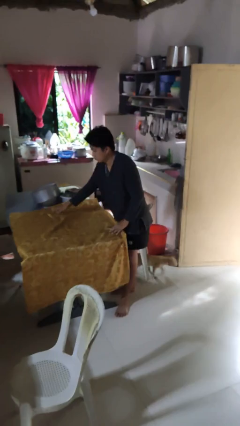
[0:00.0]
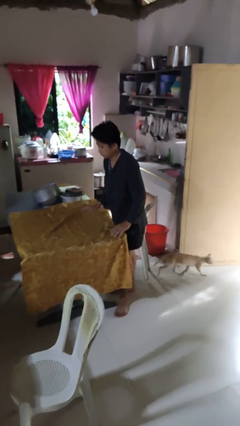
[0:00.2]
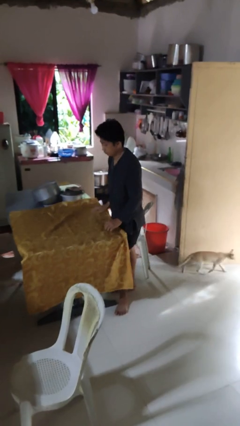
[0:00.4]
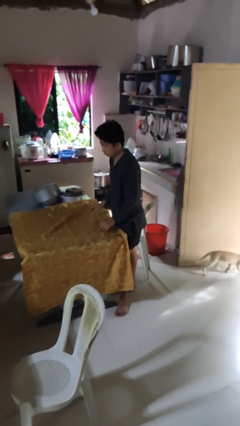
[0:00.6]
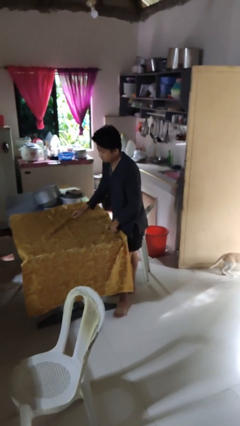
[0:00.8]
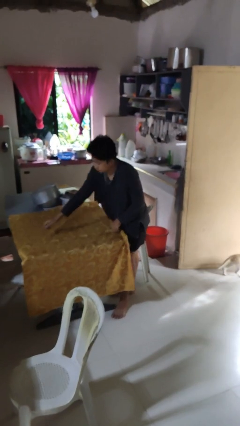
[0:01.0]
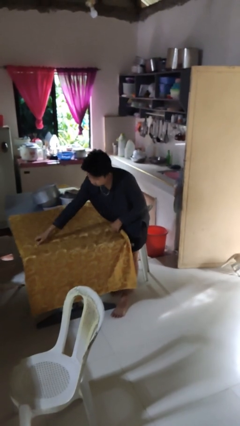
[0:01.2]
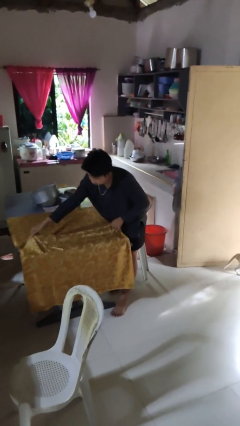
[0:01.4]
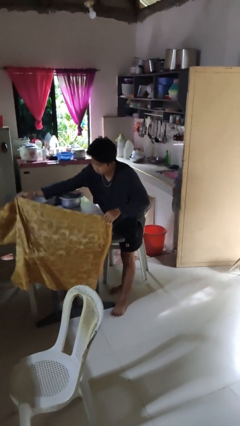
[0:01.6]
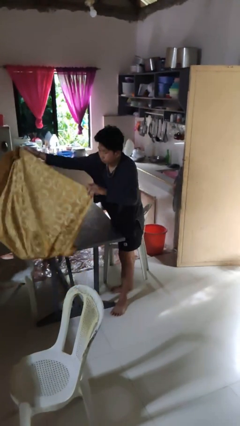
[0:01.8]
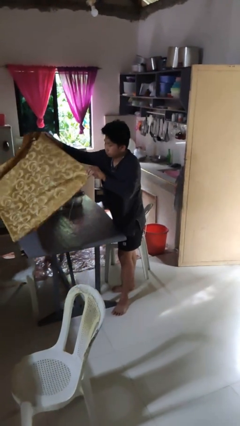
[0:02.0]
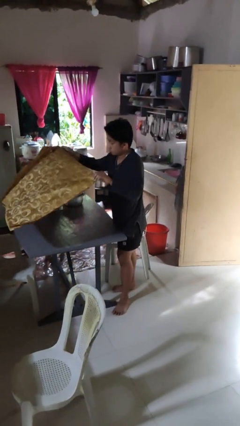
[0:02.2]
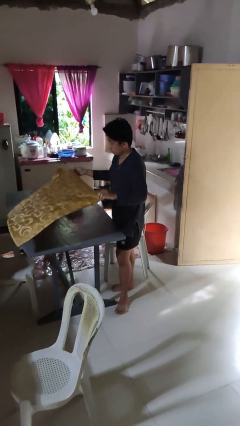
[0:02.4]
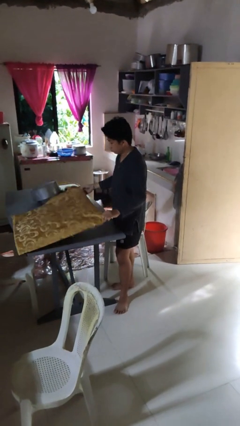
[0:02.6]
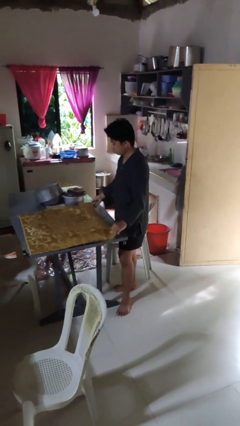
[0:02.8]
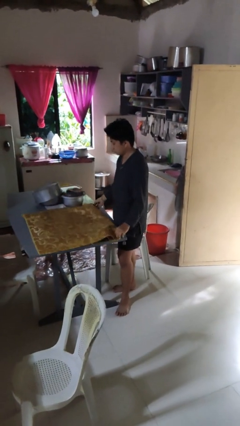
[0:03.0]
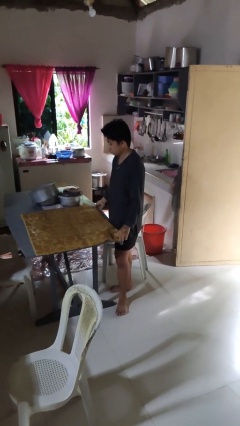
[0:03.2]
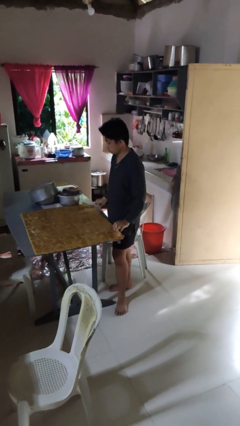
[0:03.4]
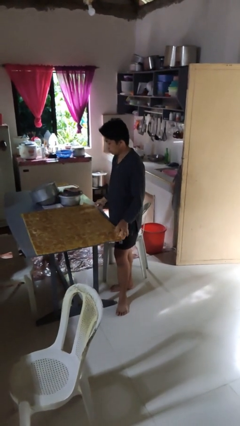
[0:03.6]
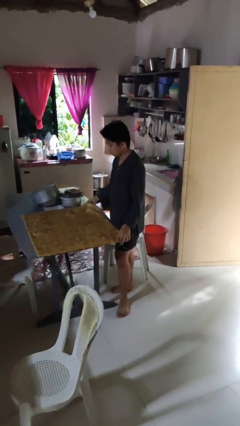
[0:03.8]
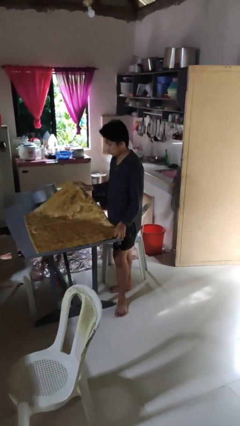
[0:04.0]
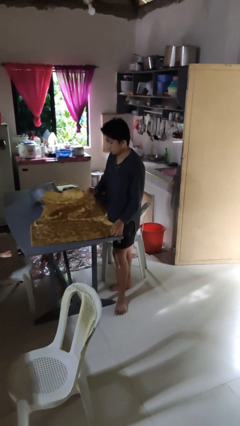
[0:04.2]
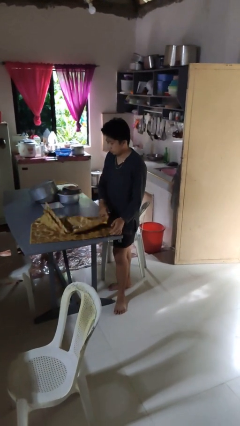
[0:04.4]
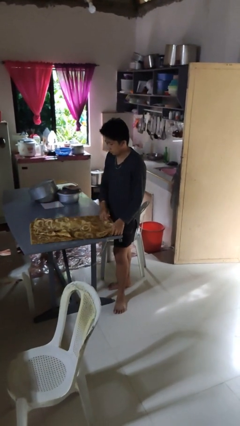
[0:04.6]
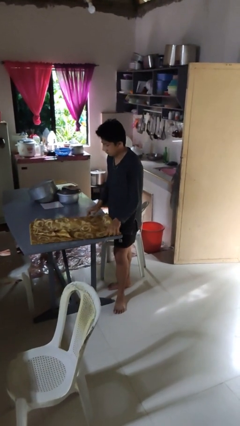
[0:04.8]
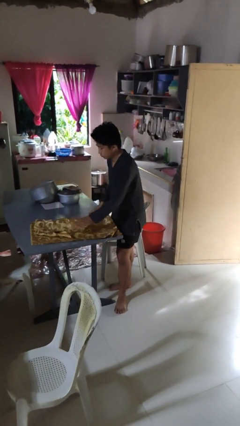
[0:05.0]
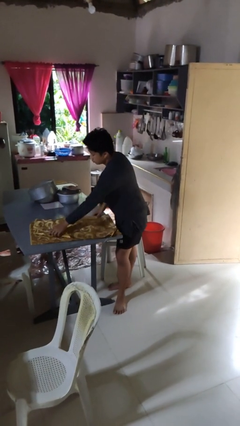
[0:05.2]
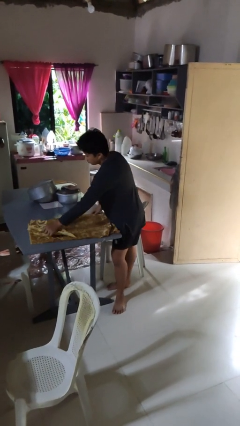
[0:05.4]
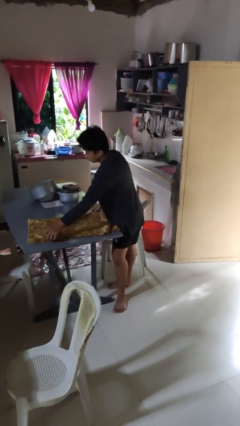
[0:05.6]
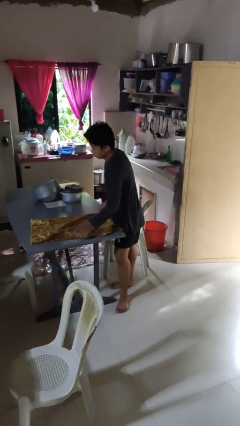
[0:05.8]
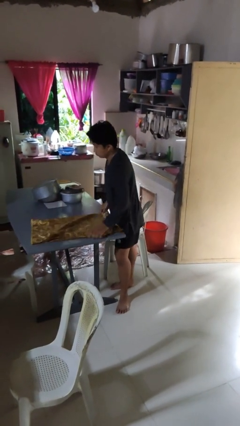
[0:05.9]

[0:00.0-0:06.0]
person folds tablecloth

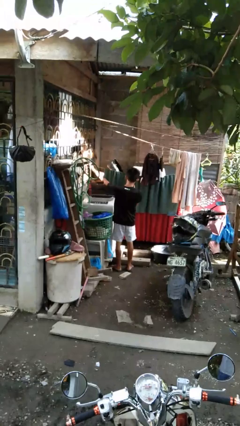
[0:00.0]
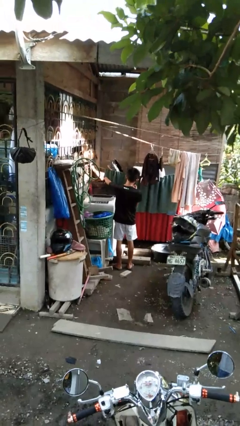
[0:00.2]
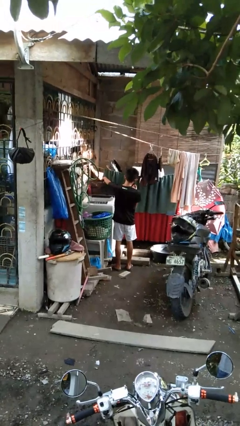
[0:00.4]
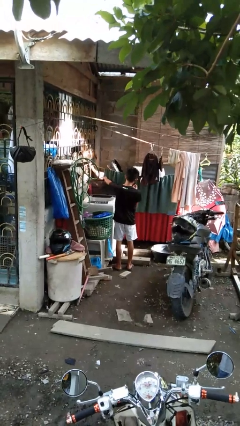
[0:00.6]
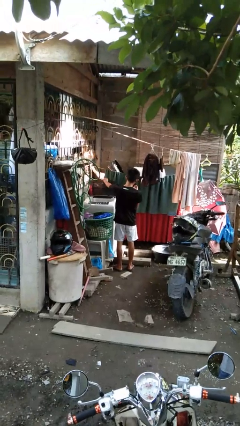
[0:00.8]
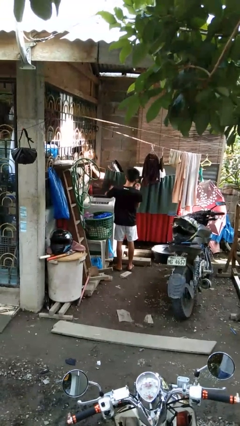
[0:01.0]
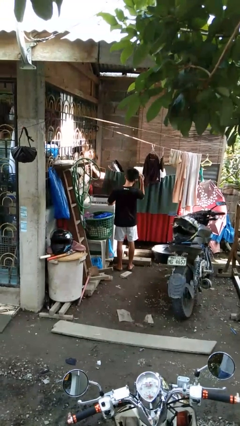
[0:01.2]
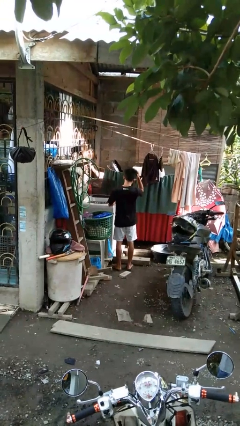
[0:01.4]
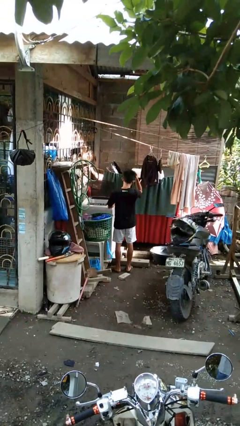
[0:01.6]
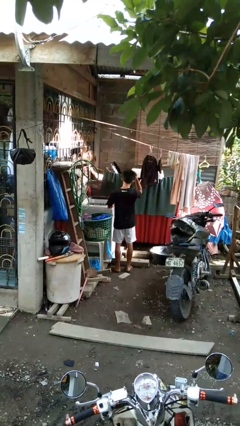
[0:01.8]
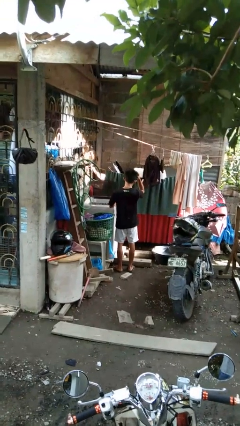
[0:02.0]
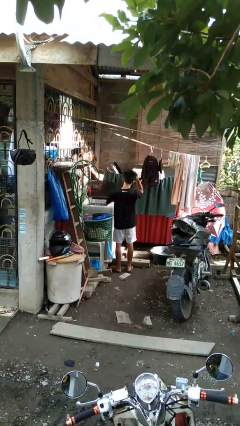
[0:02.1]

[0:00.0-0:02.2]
person opens clothes washer

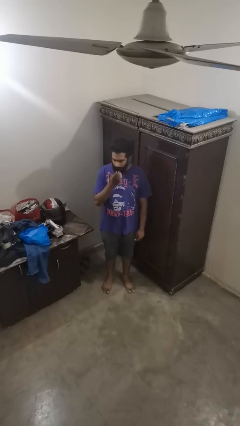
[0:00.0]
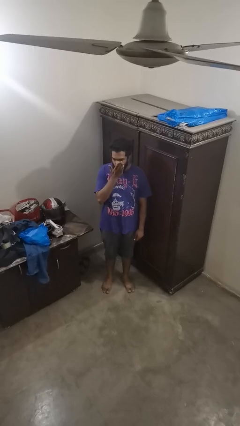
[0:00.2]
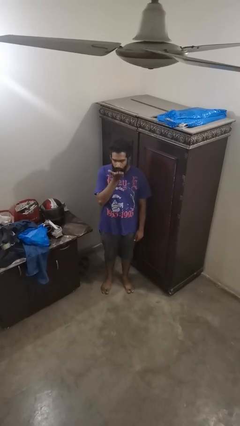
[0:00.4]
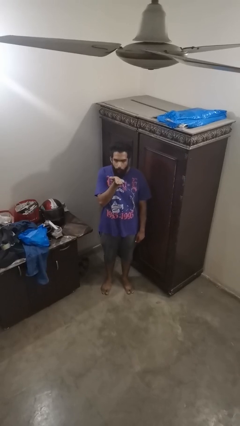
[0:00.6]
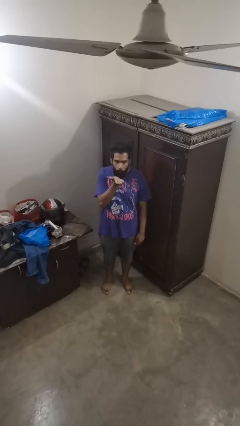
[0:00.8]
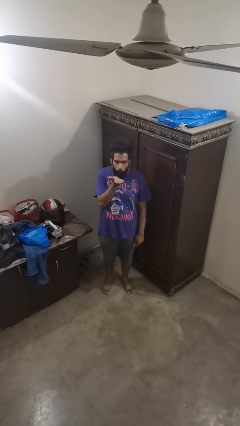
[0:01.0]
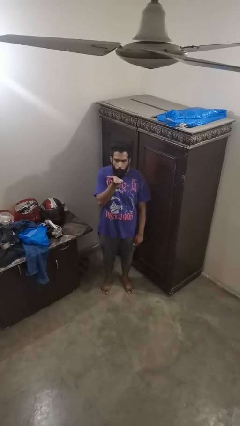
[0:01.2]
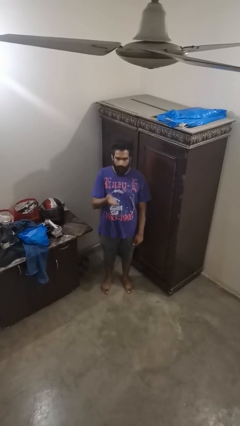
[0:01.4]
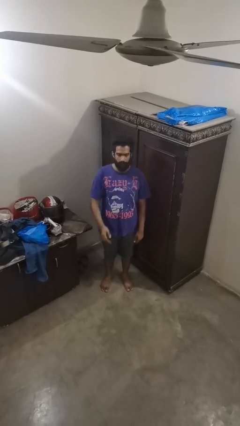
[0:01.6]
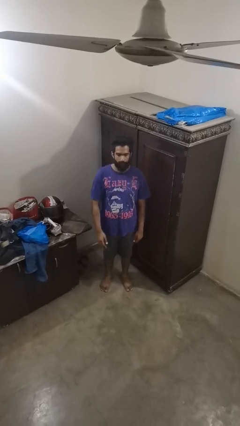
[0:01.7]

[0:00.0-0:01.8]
person gestures blow kiss

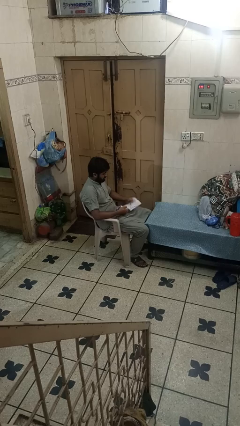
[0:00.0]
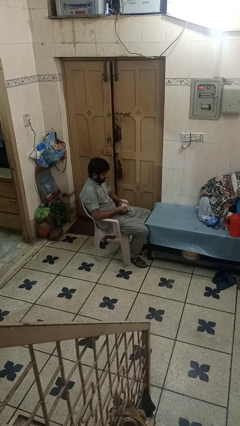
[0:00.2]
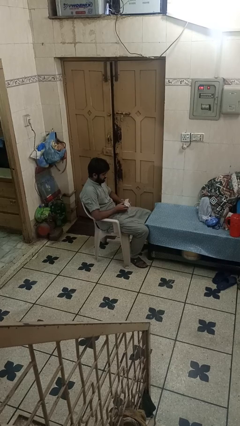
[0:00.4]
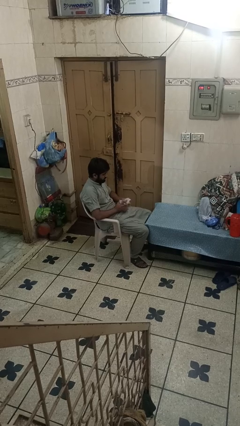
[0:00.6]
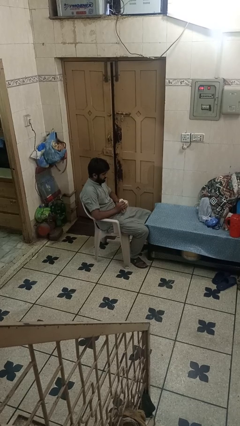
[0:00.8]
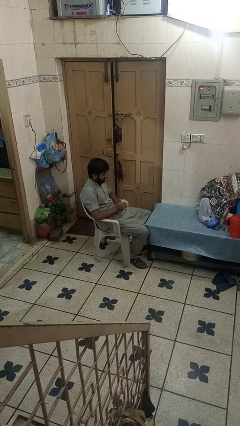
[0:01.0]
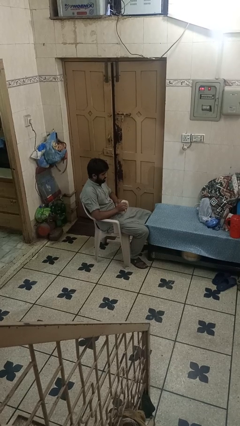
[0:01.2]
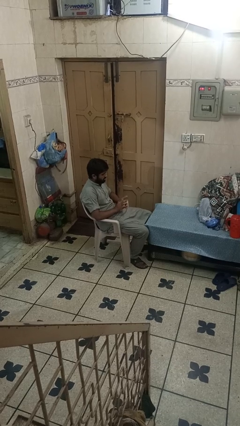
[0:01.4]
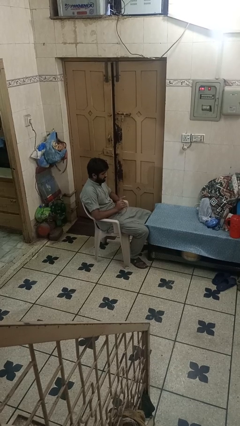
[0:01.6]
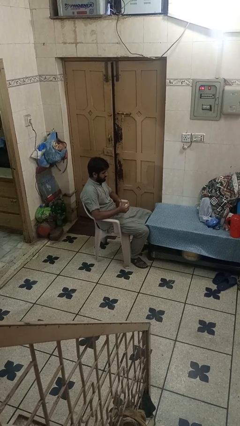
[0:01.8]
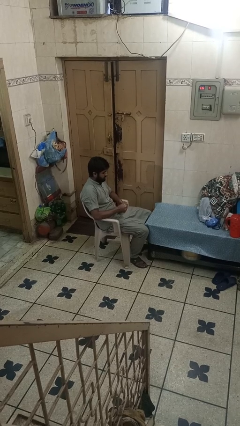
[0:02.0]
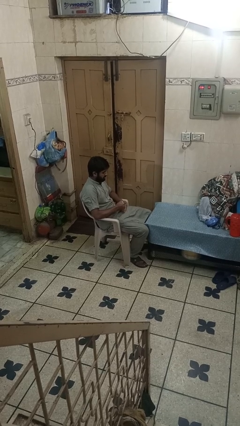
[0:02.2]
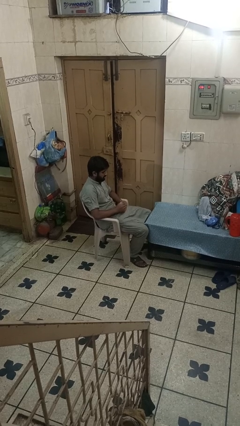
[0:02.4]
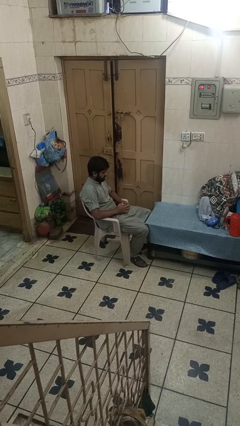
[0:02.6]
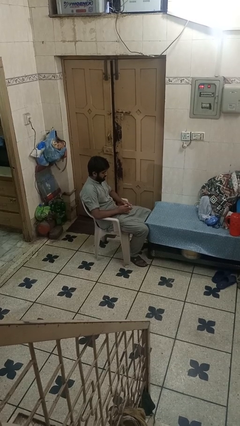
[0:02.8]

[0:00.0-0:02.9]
person crumples paper

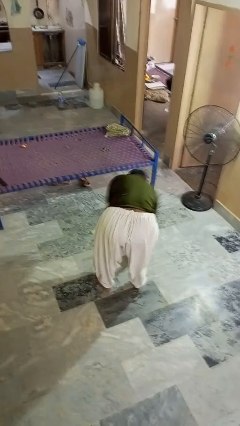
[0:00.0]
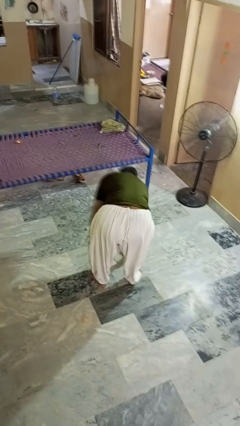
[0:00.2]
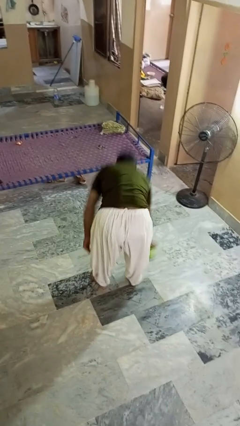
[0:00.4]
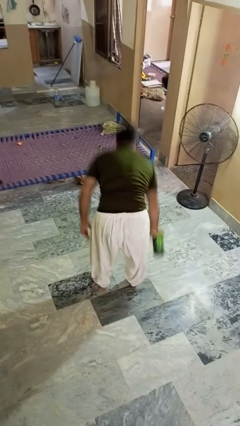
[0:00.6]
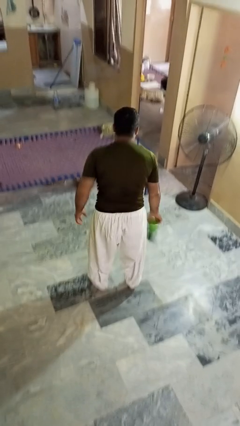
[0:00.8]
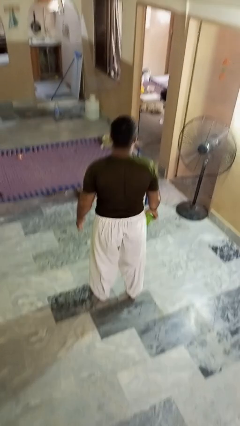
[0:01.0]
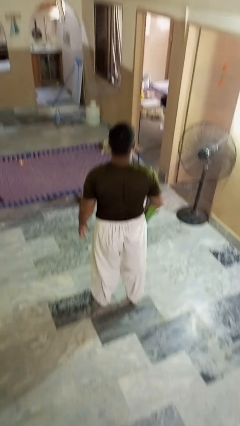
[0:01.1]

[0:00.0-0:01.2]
person picks up object from floor

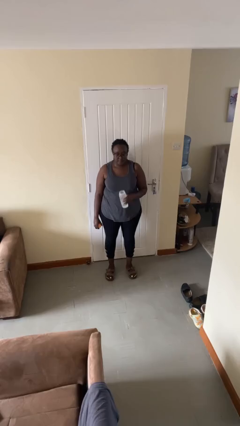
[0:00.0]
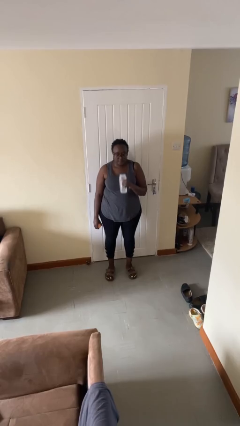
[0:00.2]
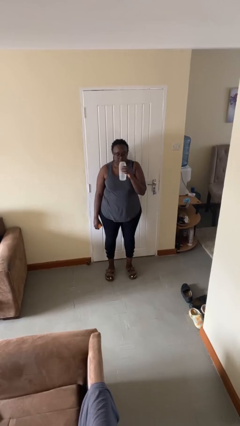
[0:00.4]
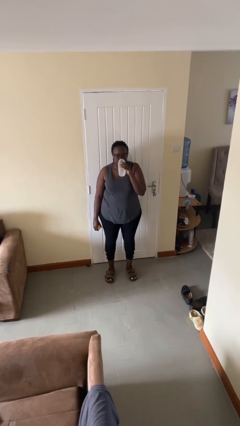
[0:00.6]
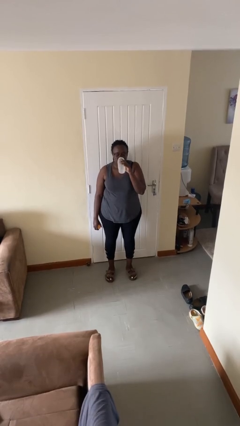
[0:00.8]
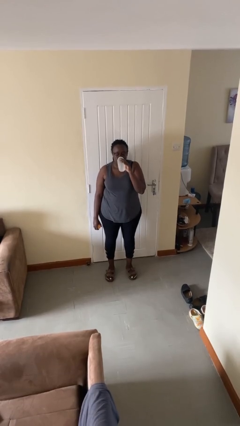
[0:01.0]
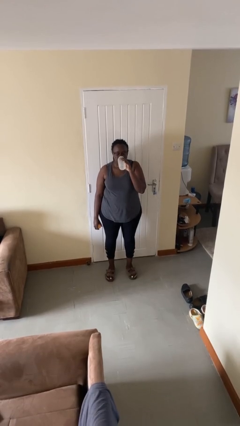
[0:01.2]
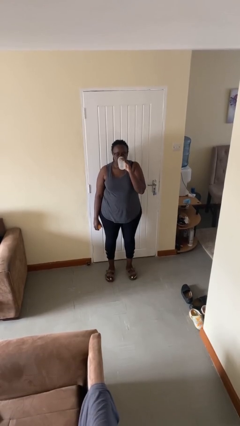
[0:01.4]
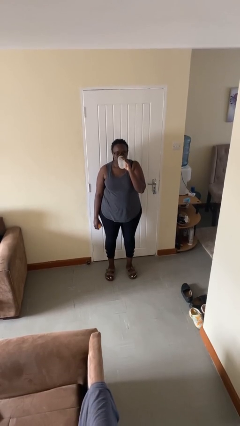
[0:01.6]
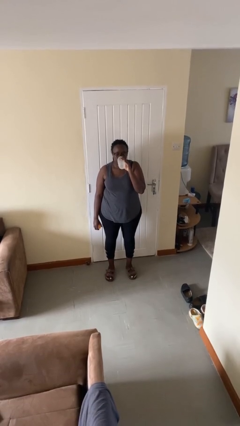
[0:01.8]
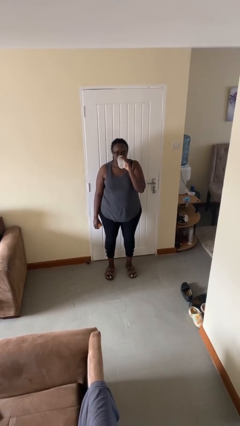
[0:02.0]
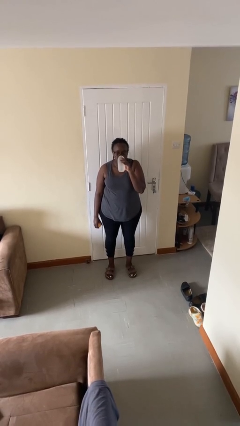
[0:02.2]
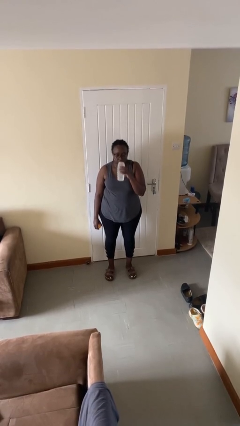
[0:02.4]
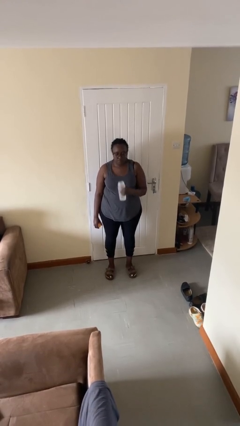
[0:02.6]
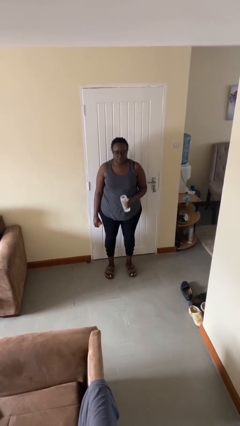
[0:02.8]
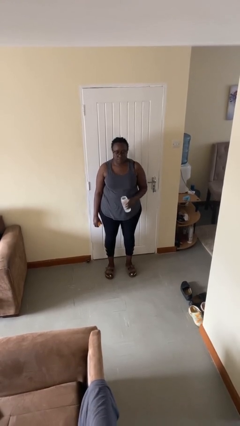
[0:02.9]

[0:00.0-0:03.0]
person drinks from bottle

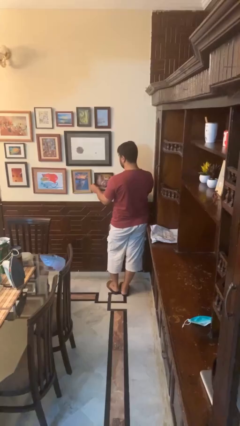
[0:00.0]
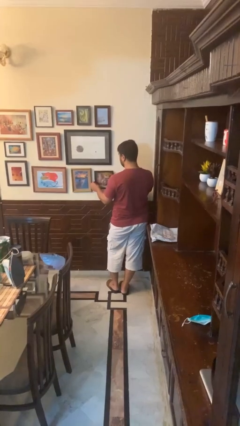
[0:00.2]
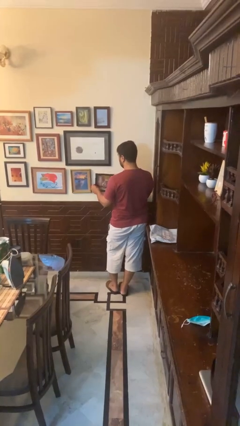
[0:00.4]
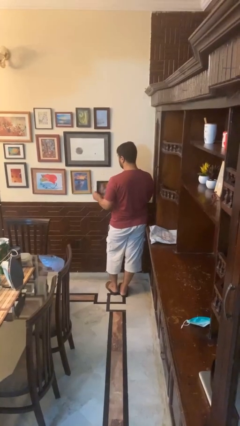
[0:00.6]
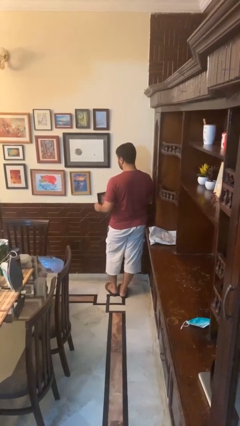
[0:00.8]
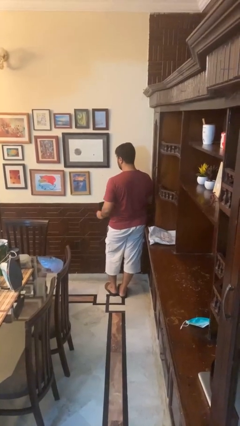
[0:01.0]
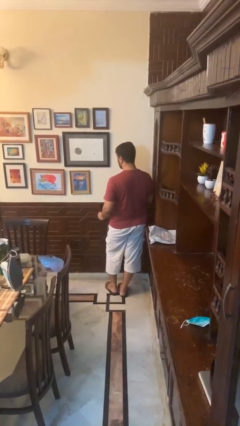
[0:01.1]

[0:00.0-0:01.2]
person takes down picture frame
